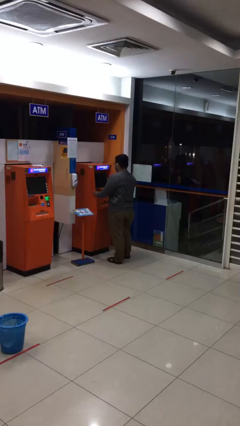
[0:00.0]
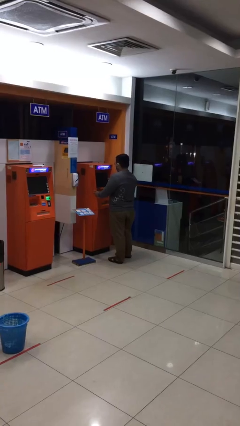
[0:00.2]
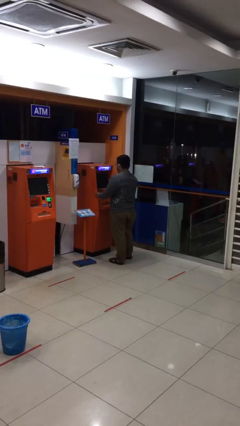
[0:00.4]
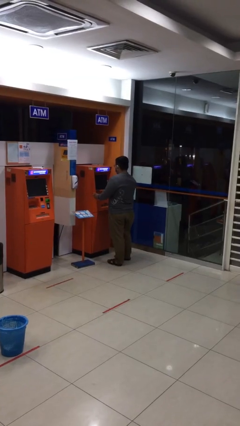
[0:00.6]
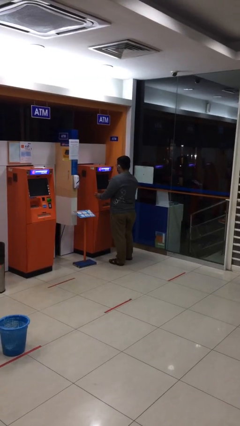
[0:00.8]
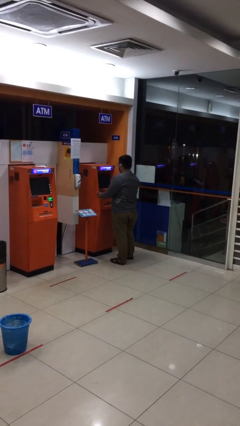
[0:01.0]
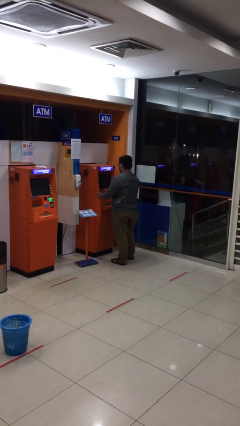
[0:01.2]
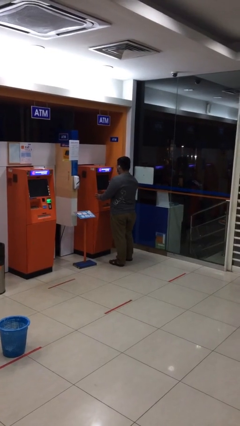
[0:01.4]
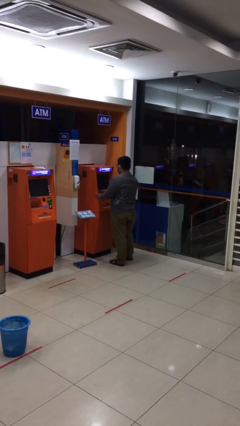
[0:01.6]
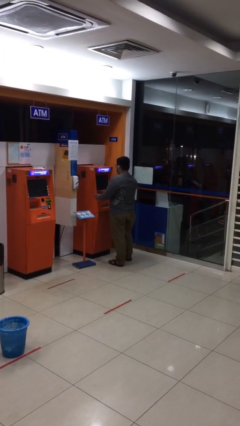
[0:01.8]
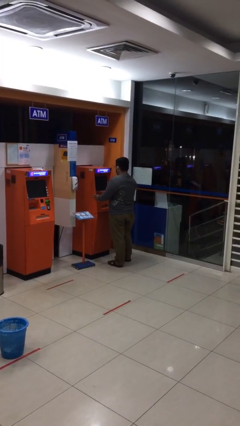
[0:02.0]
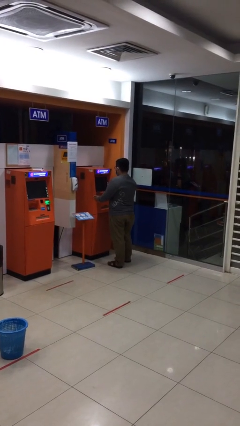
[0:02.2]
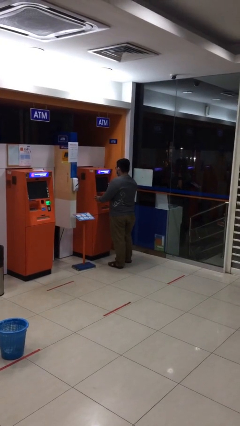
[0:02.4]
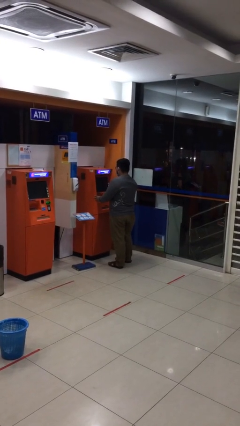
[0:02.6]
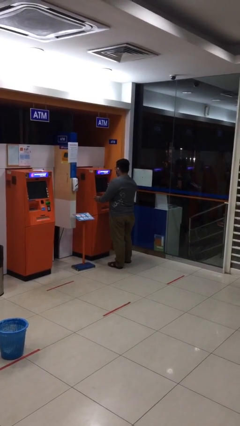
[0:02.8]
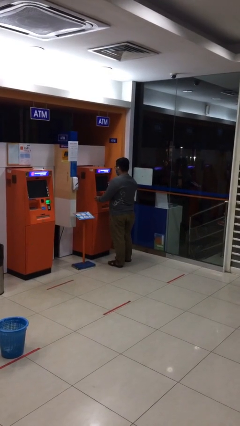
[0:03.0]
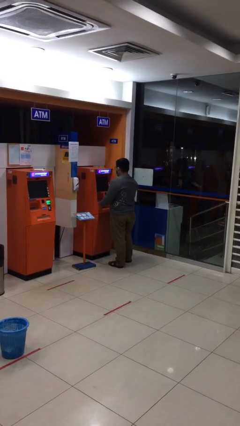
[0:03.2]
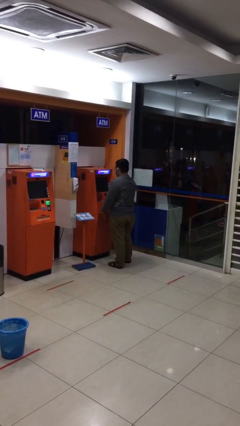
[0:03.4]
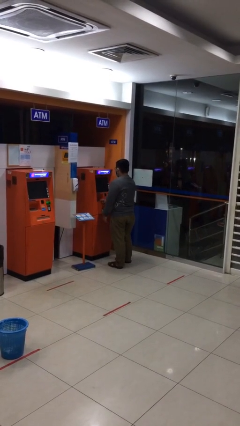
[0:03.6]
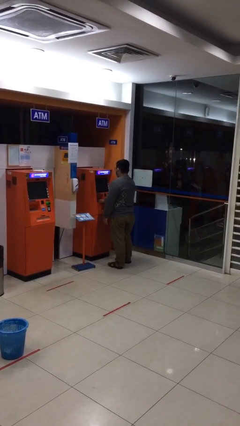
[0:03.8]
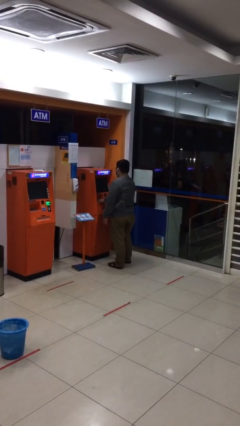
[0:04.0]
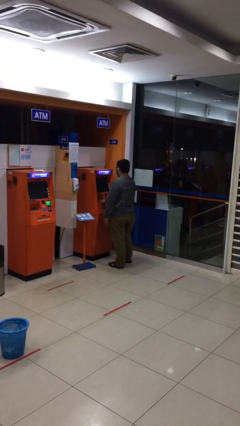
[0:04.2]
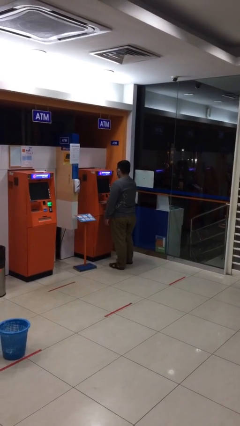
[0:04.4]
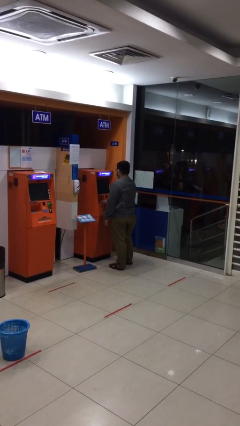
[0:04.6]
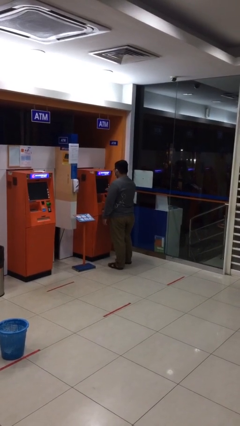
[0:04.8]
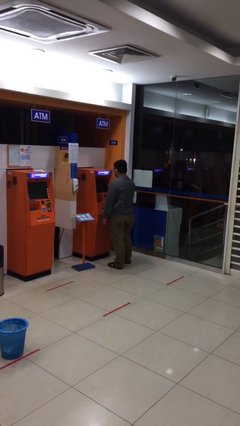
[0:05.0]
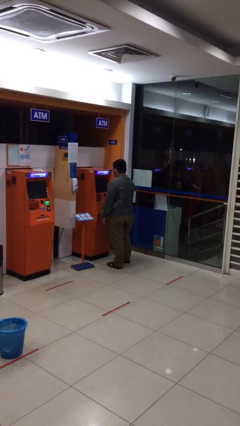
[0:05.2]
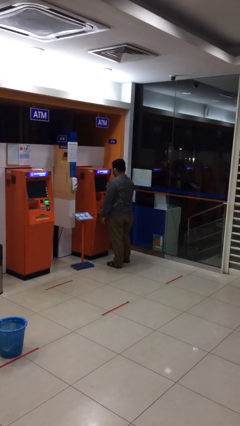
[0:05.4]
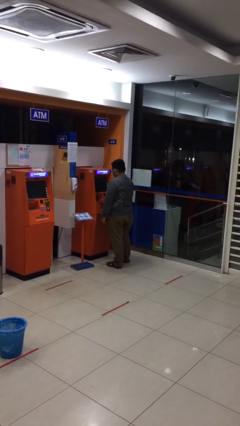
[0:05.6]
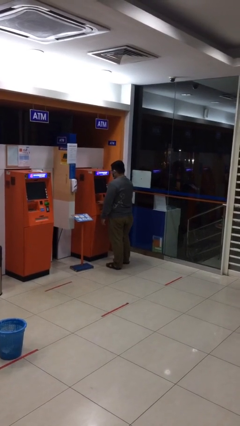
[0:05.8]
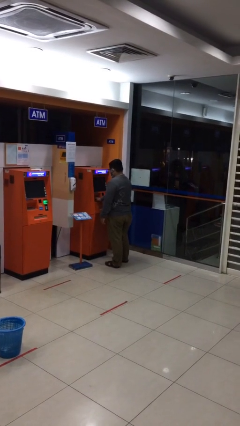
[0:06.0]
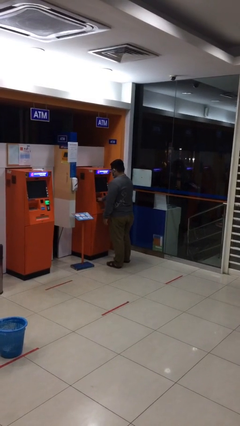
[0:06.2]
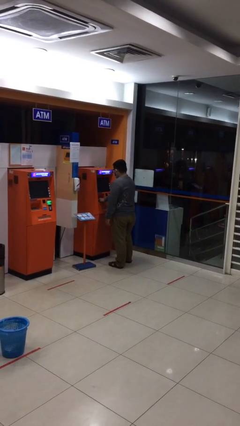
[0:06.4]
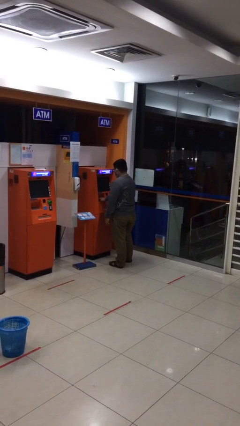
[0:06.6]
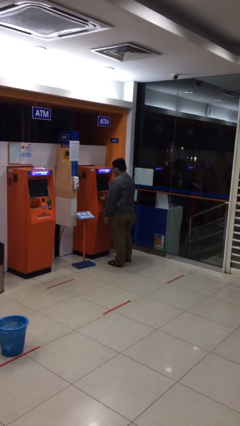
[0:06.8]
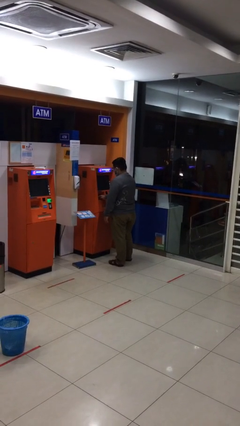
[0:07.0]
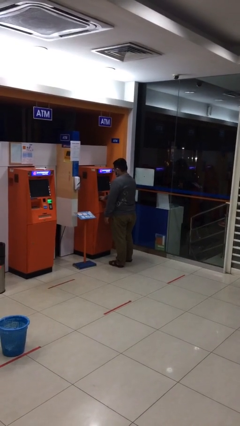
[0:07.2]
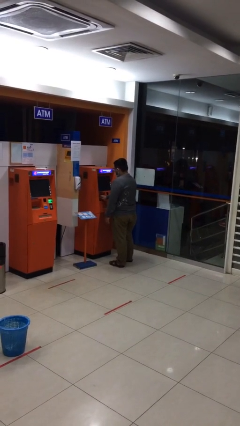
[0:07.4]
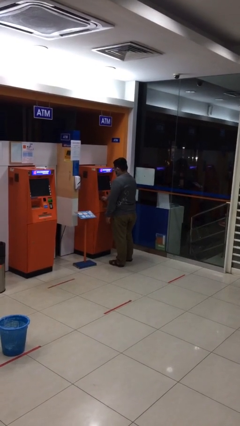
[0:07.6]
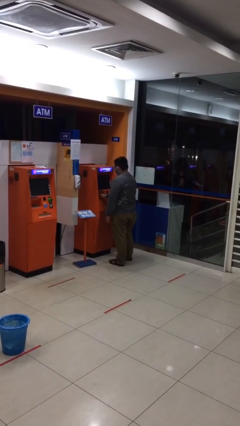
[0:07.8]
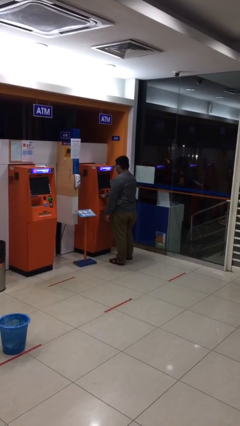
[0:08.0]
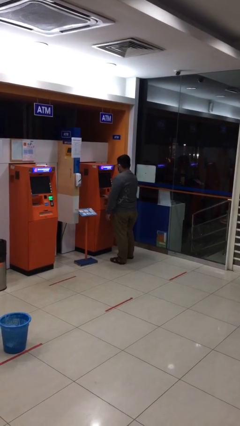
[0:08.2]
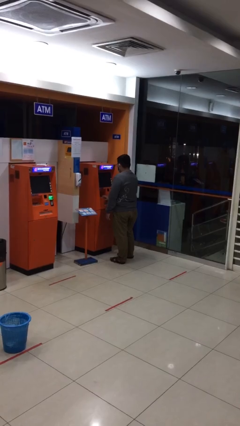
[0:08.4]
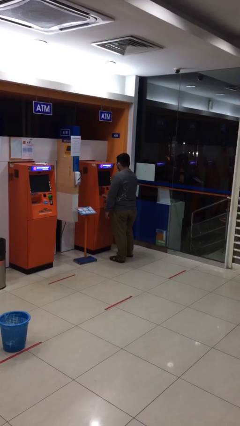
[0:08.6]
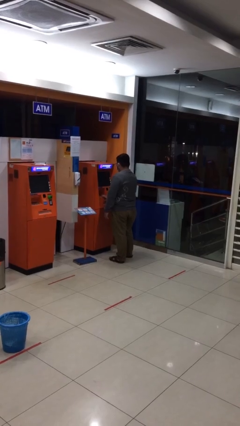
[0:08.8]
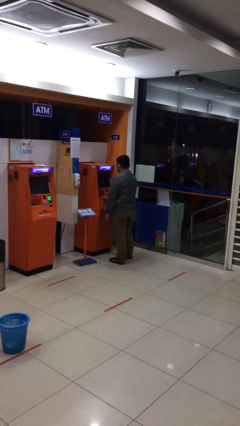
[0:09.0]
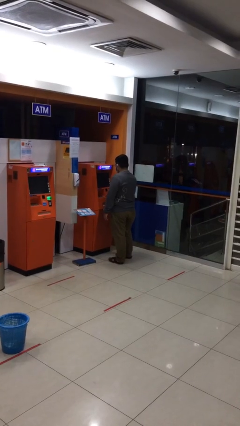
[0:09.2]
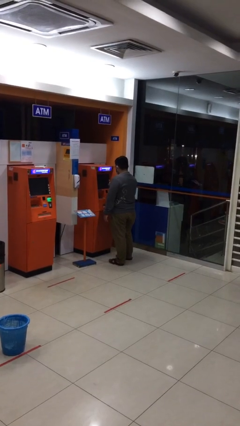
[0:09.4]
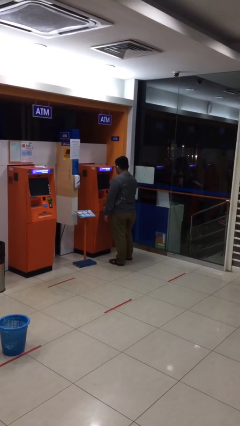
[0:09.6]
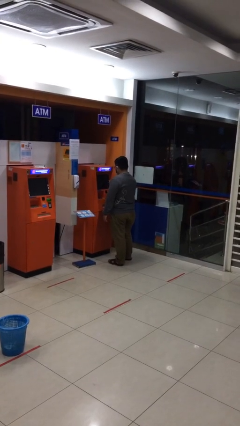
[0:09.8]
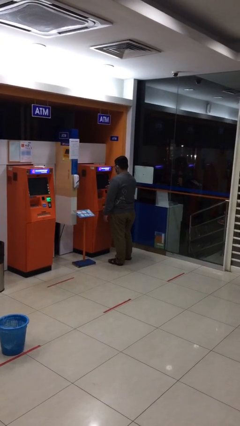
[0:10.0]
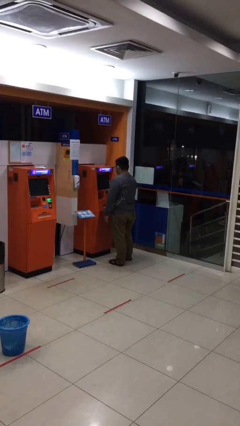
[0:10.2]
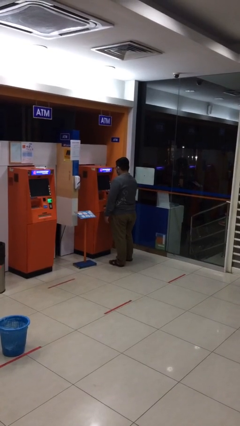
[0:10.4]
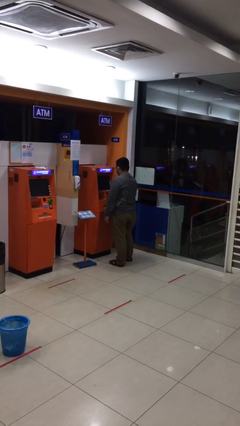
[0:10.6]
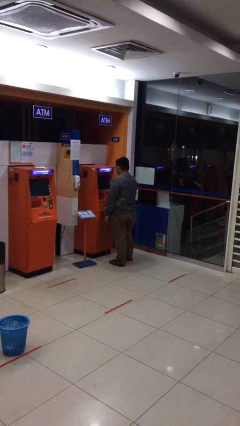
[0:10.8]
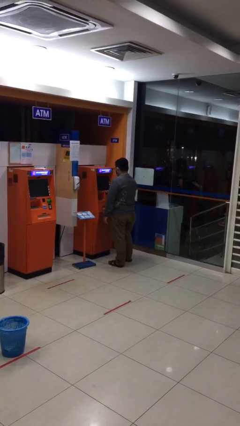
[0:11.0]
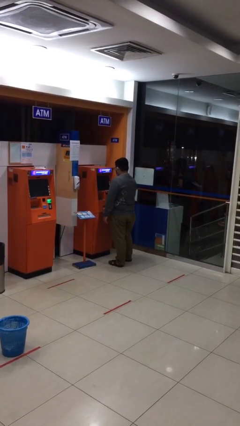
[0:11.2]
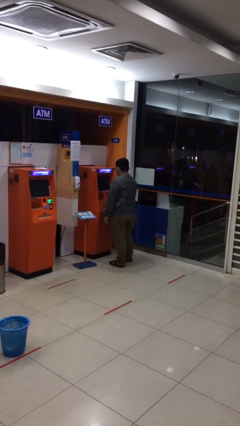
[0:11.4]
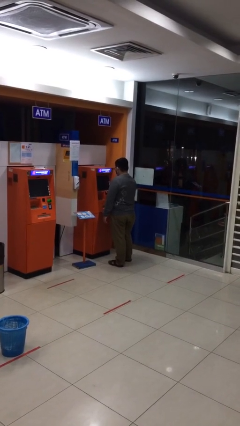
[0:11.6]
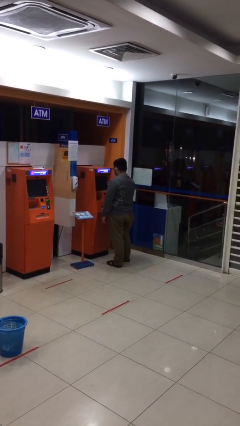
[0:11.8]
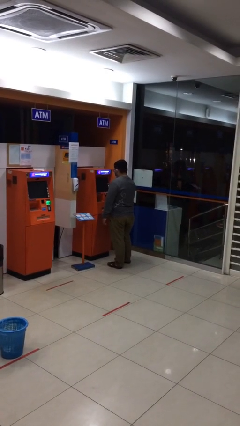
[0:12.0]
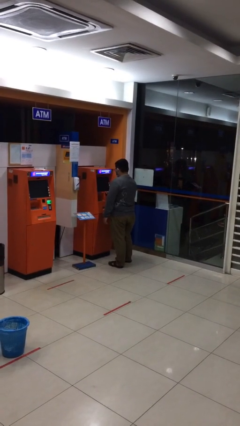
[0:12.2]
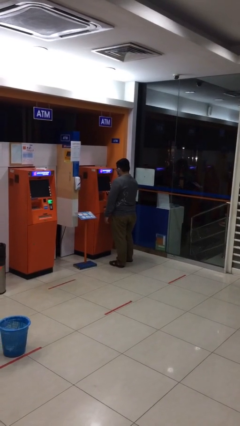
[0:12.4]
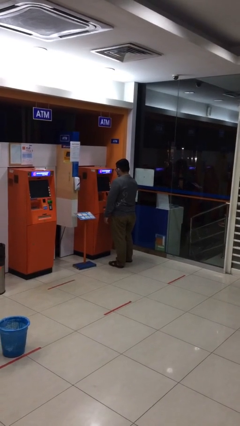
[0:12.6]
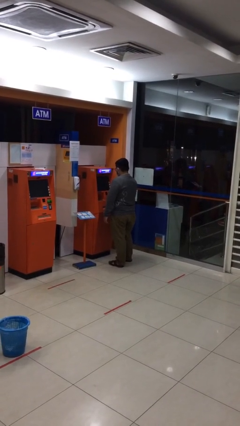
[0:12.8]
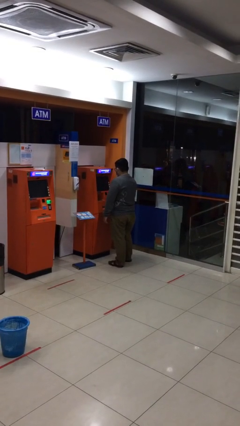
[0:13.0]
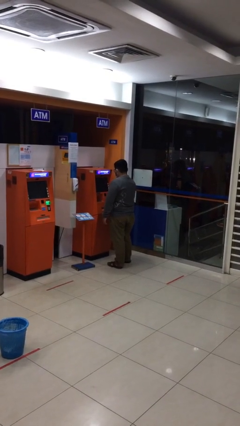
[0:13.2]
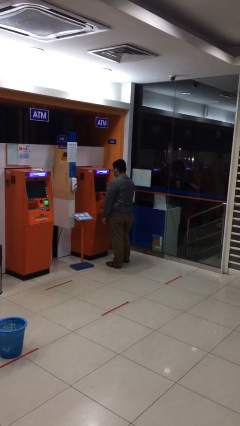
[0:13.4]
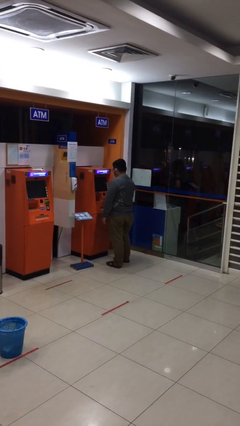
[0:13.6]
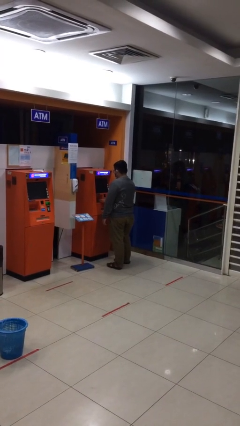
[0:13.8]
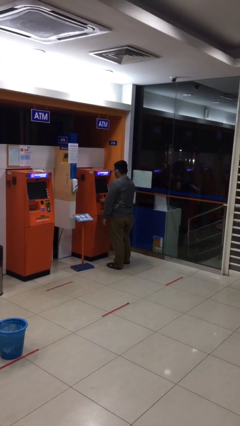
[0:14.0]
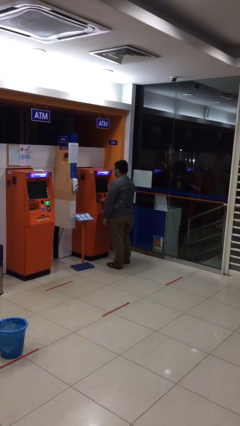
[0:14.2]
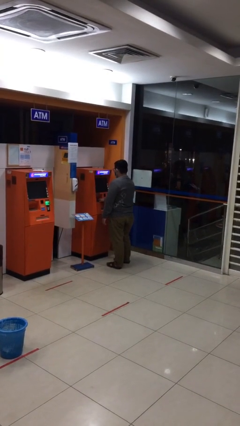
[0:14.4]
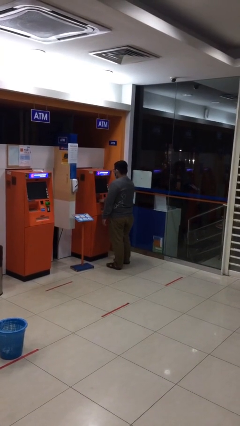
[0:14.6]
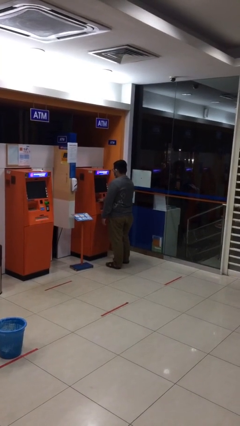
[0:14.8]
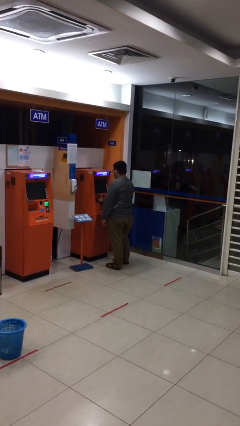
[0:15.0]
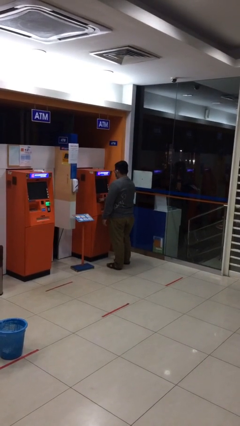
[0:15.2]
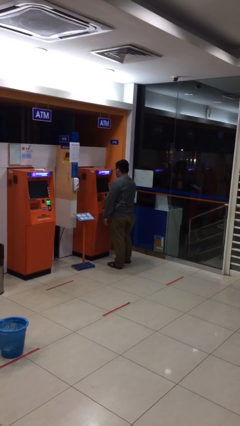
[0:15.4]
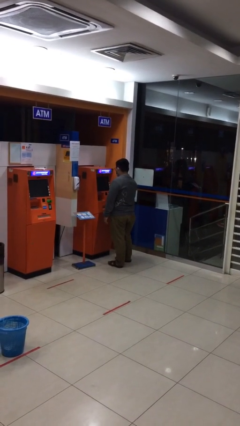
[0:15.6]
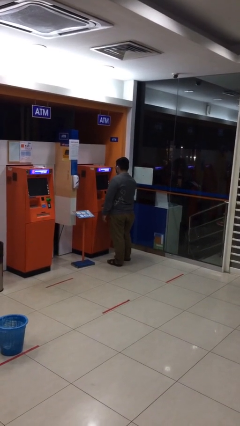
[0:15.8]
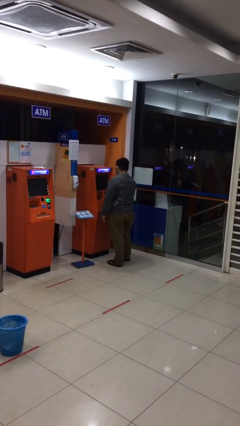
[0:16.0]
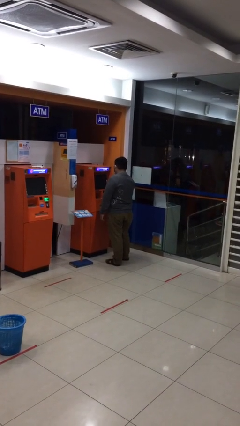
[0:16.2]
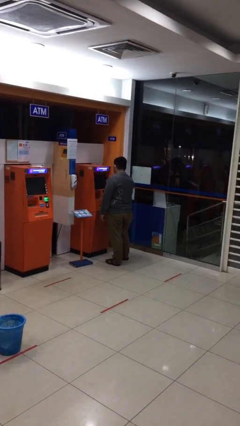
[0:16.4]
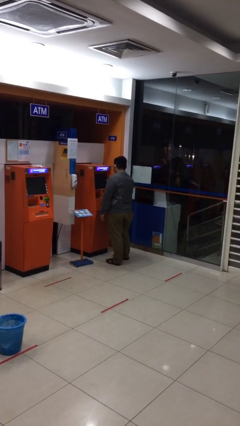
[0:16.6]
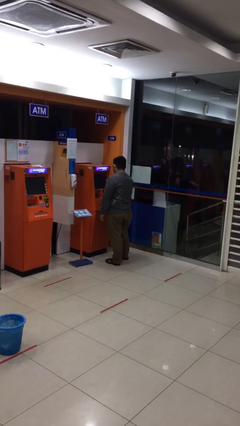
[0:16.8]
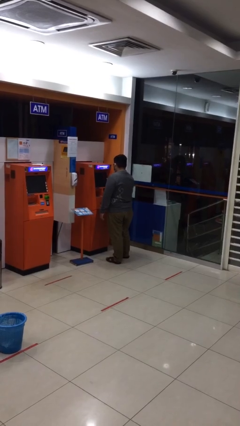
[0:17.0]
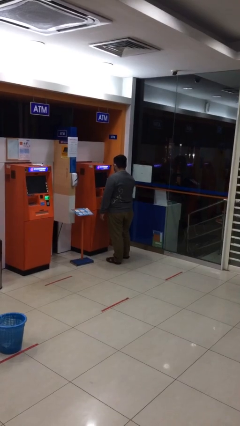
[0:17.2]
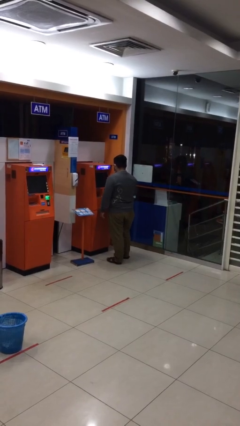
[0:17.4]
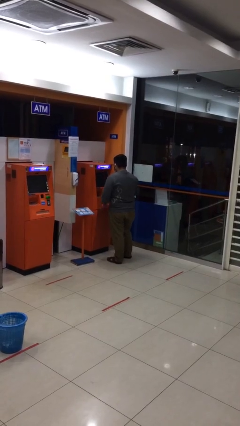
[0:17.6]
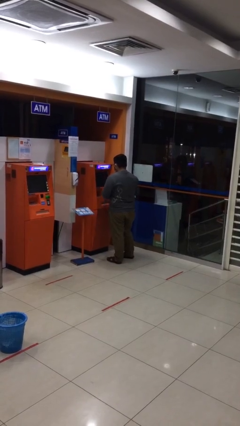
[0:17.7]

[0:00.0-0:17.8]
person purchases from machine

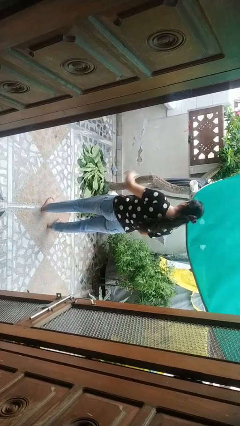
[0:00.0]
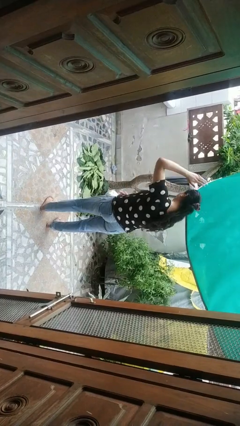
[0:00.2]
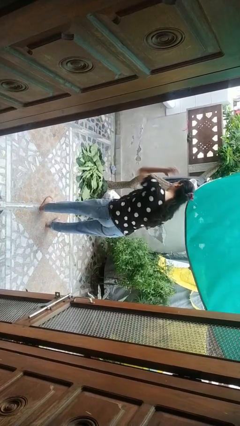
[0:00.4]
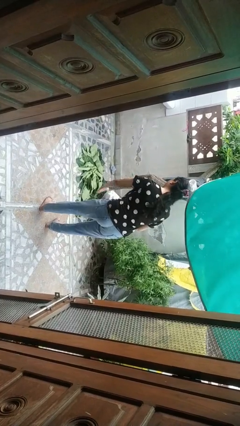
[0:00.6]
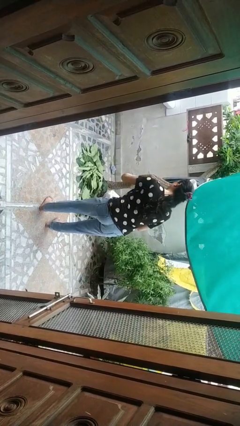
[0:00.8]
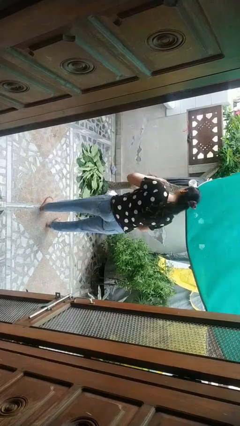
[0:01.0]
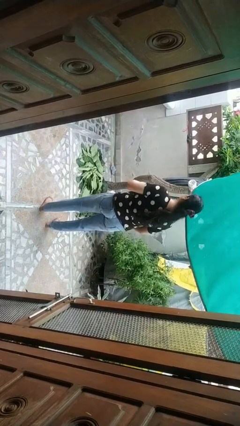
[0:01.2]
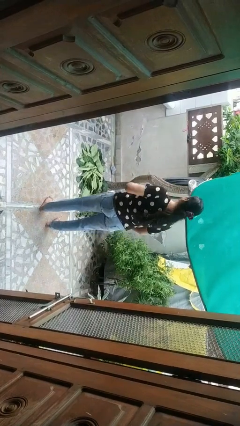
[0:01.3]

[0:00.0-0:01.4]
person karate chop
